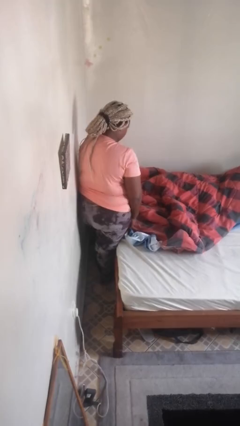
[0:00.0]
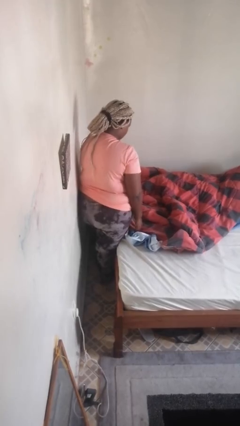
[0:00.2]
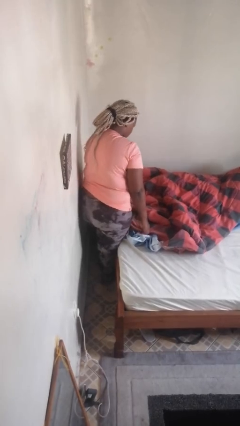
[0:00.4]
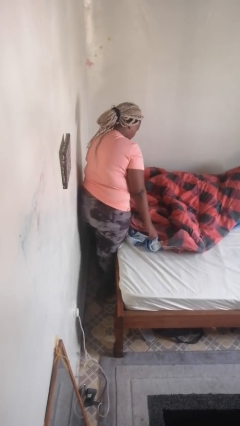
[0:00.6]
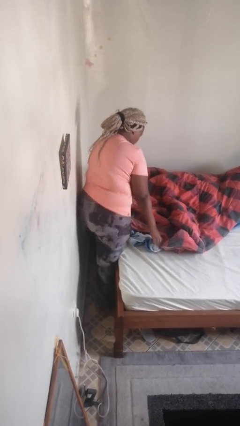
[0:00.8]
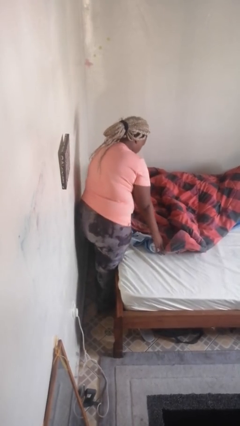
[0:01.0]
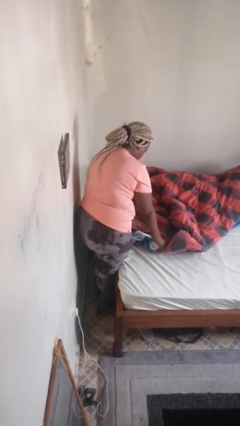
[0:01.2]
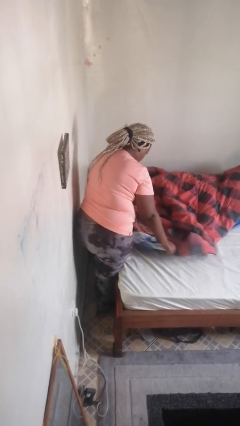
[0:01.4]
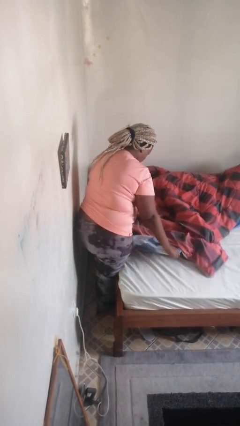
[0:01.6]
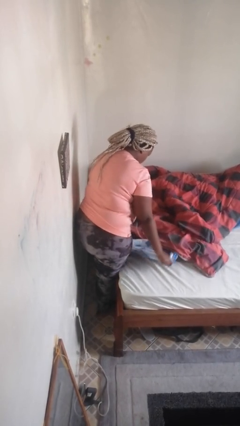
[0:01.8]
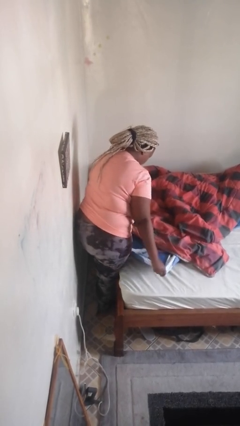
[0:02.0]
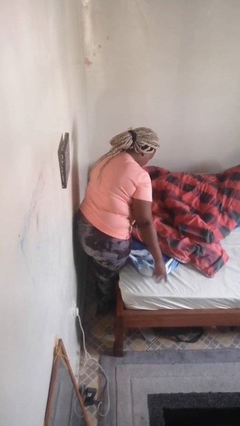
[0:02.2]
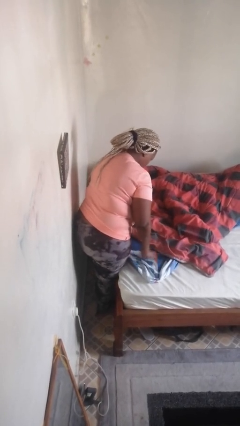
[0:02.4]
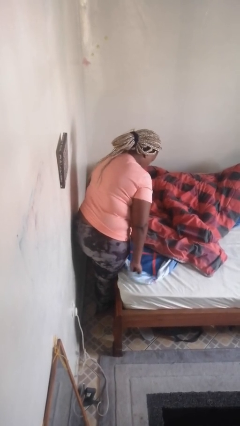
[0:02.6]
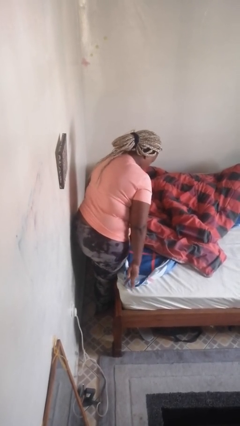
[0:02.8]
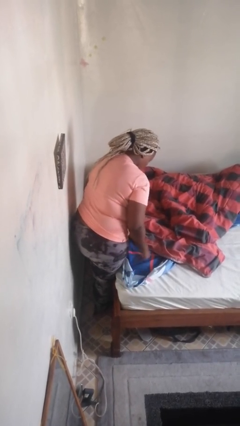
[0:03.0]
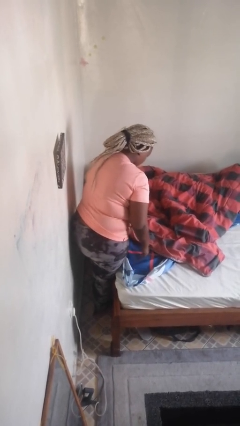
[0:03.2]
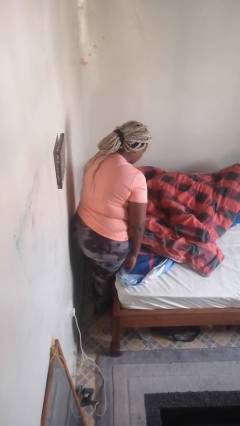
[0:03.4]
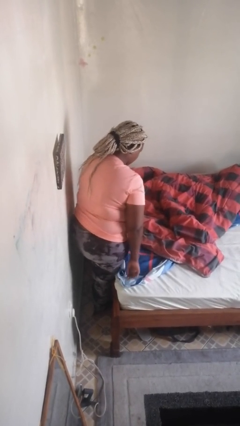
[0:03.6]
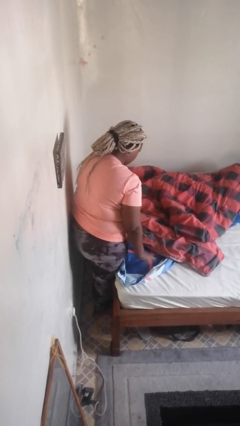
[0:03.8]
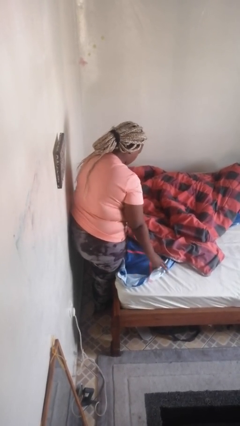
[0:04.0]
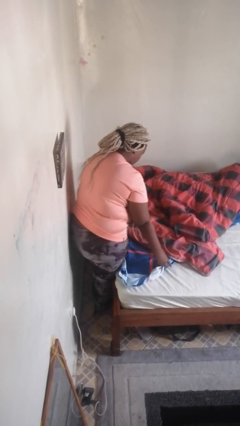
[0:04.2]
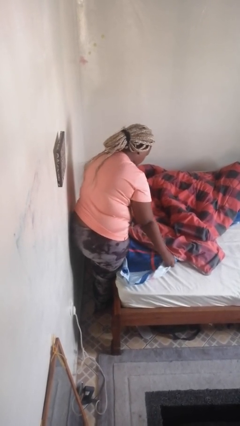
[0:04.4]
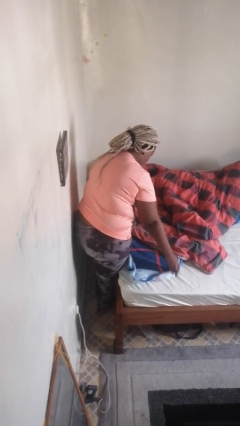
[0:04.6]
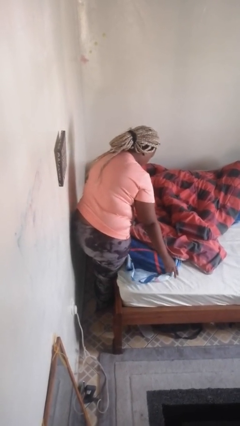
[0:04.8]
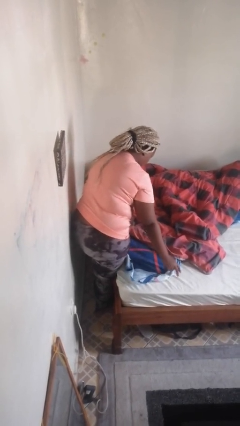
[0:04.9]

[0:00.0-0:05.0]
person makes bed

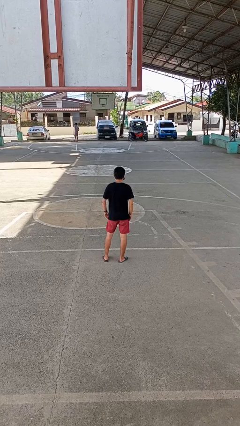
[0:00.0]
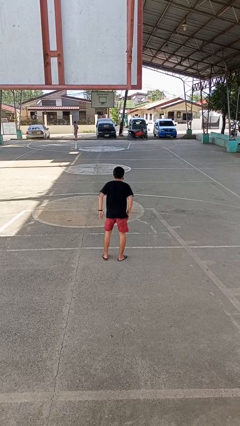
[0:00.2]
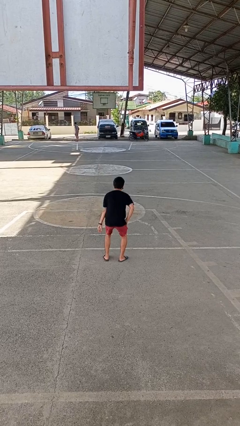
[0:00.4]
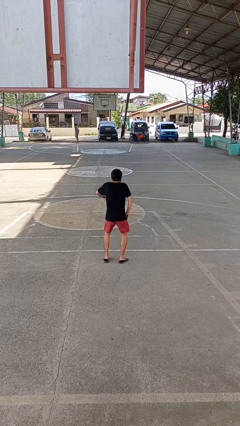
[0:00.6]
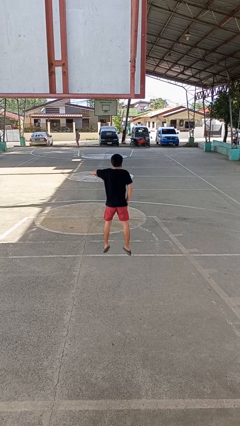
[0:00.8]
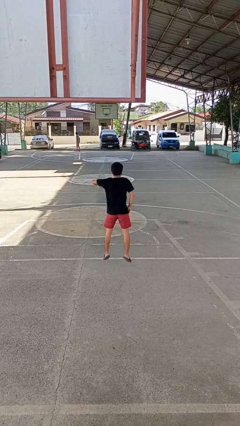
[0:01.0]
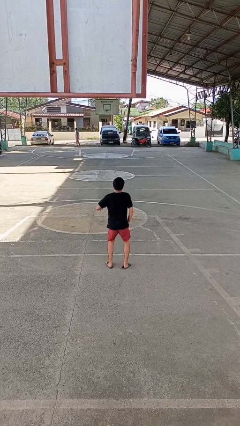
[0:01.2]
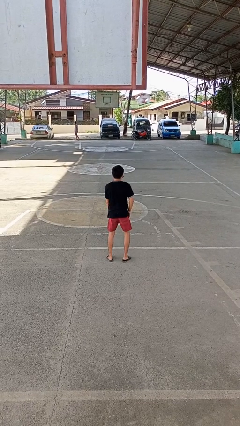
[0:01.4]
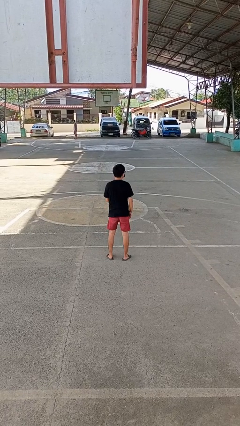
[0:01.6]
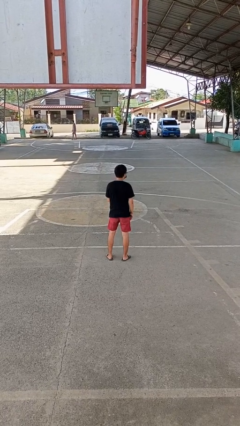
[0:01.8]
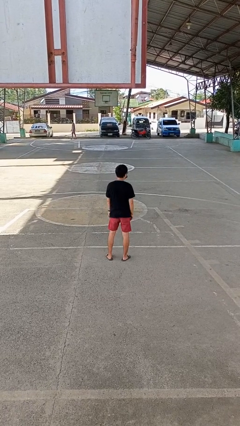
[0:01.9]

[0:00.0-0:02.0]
person jumps

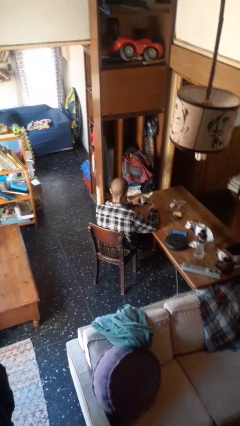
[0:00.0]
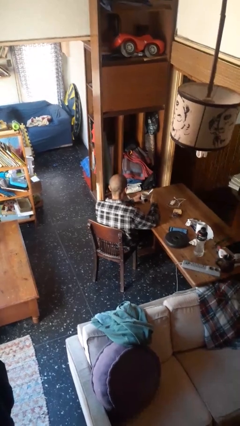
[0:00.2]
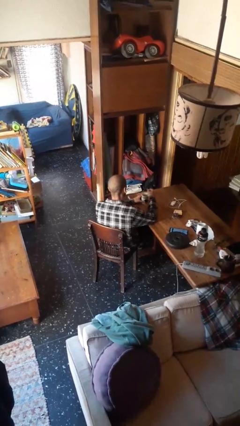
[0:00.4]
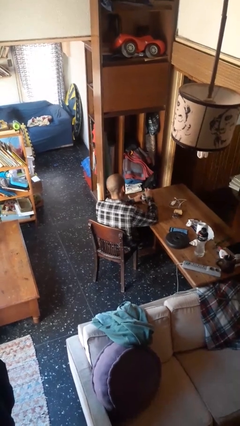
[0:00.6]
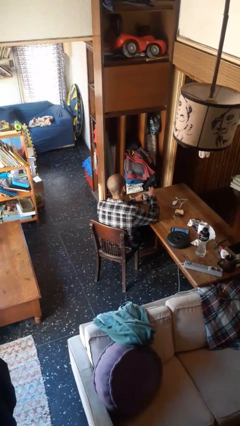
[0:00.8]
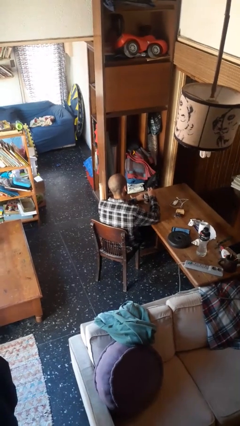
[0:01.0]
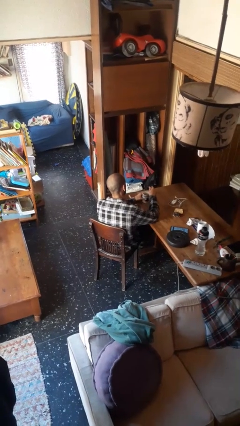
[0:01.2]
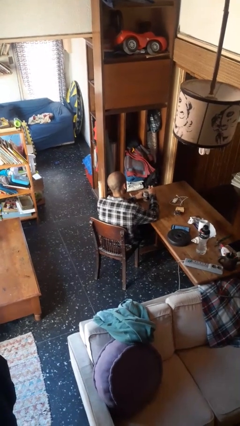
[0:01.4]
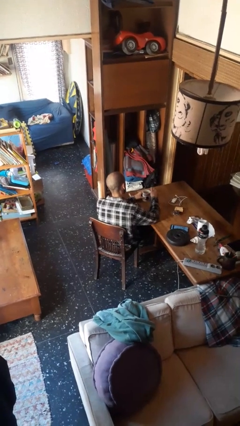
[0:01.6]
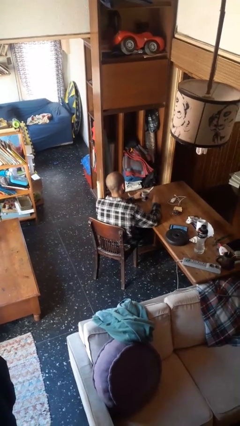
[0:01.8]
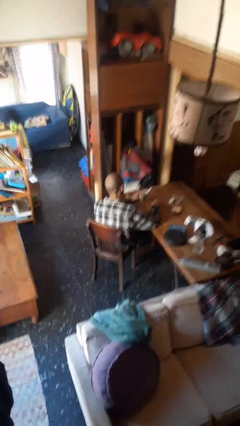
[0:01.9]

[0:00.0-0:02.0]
person stirs mug

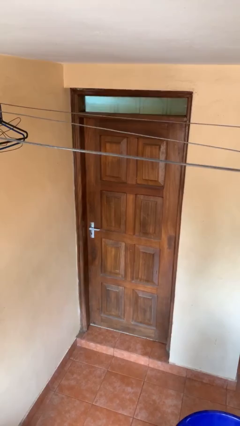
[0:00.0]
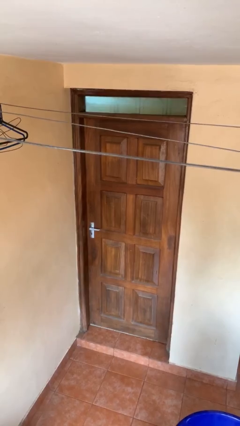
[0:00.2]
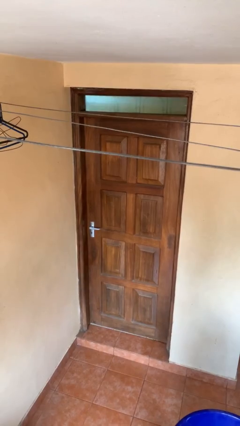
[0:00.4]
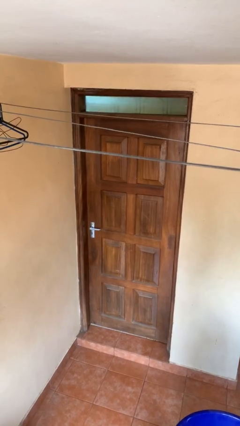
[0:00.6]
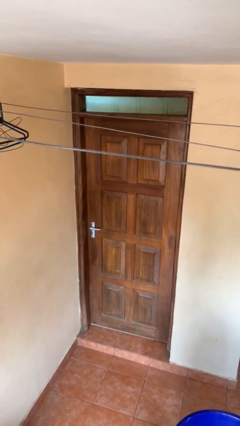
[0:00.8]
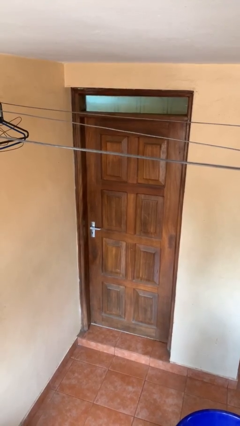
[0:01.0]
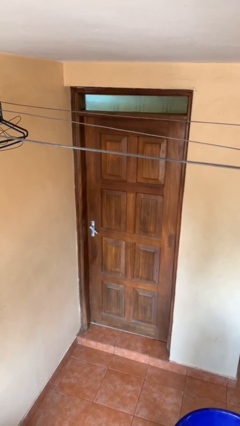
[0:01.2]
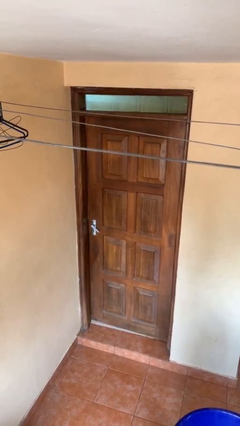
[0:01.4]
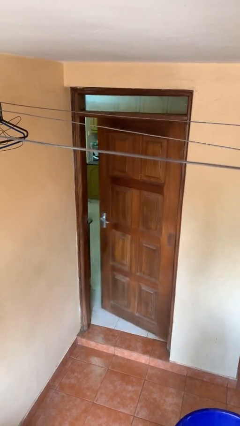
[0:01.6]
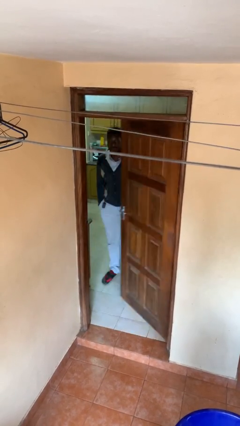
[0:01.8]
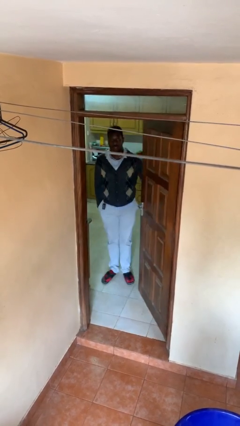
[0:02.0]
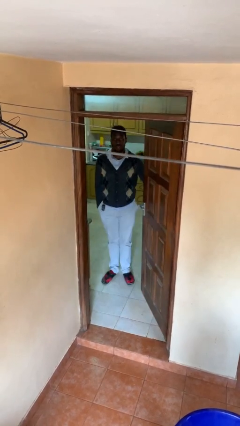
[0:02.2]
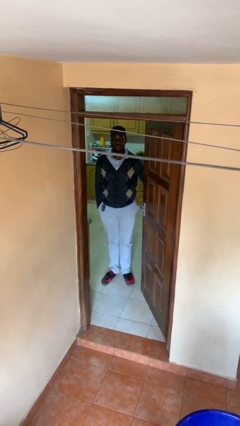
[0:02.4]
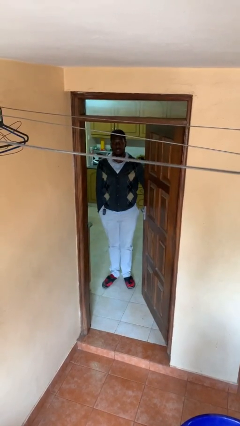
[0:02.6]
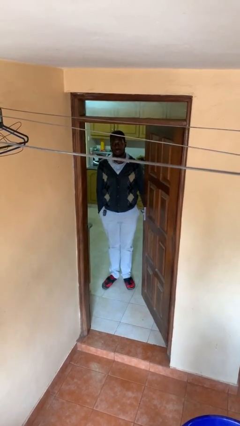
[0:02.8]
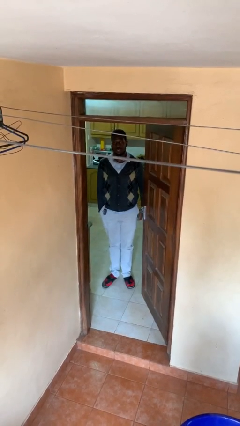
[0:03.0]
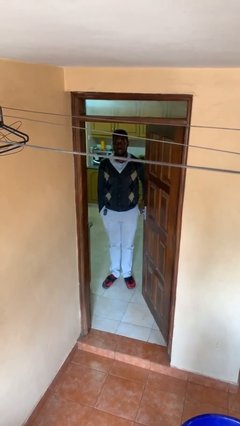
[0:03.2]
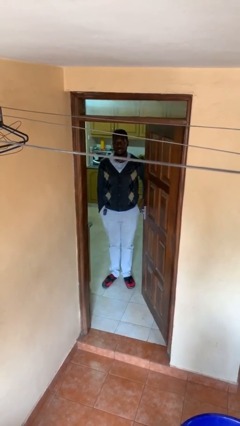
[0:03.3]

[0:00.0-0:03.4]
person opens facility door

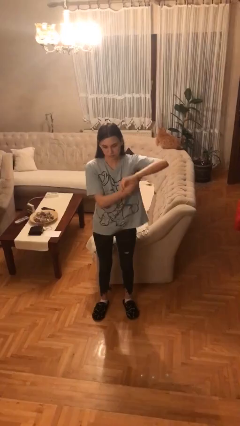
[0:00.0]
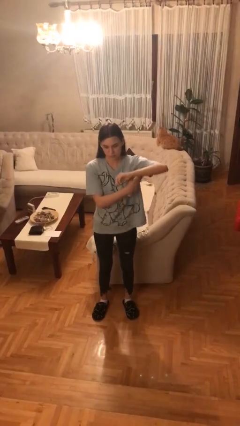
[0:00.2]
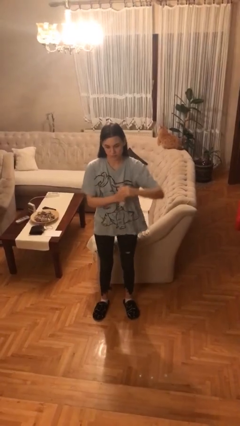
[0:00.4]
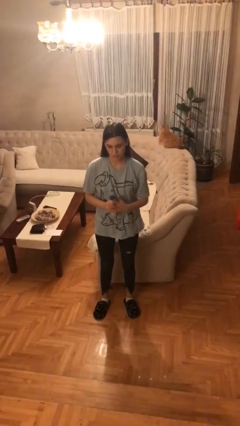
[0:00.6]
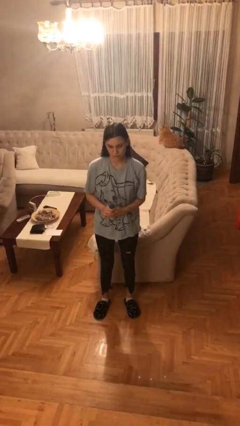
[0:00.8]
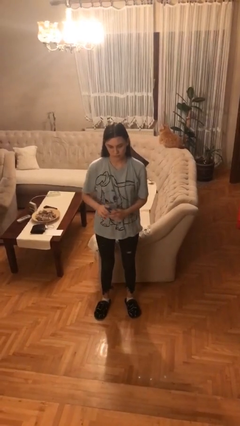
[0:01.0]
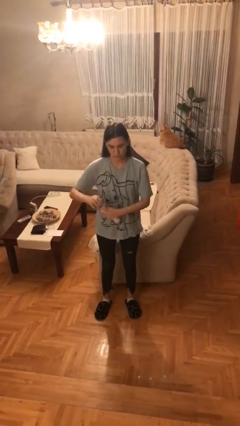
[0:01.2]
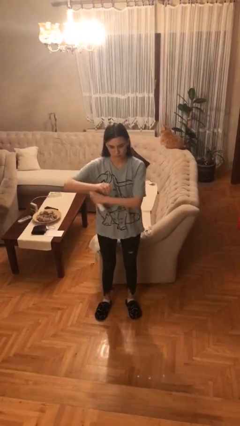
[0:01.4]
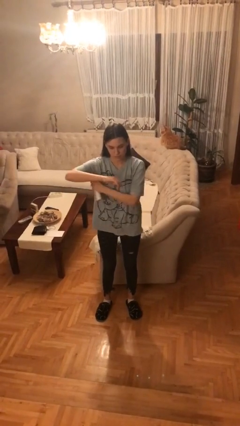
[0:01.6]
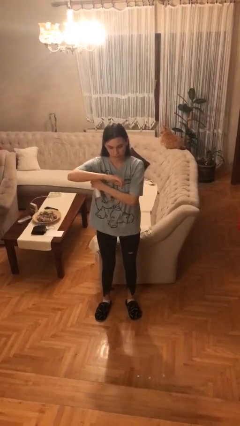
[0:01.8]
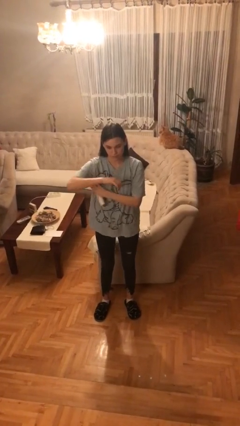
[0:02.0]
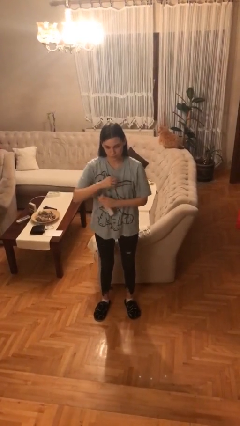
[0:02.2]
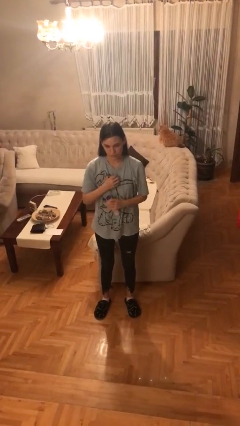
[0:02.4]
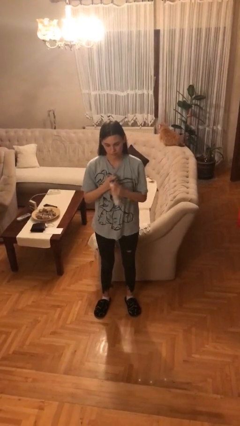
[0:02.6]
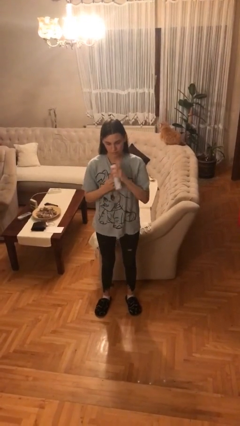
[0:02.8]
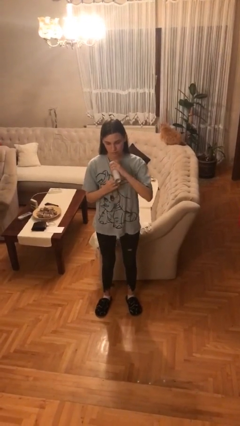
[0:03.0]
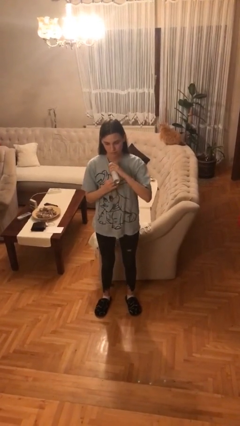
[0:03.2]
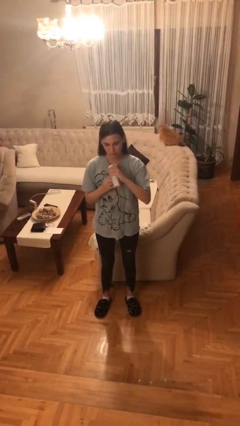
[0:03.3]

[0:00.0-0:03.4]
person applies deodorant

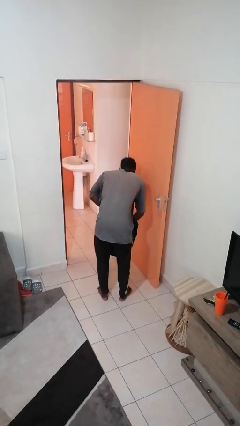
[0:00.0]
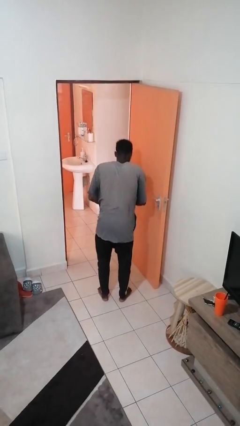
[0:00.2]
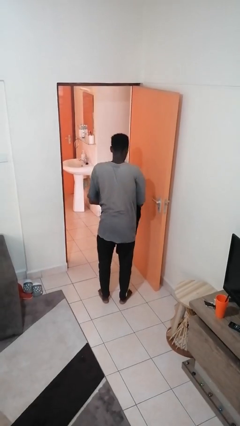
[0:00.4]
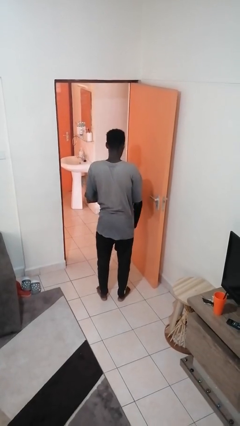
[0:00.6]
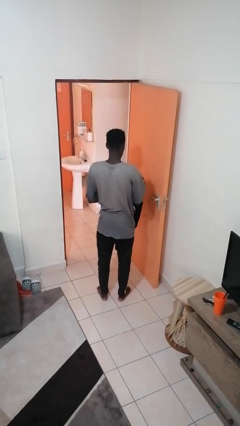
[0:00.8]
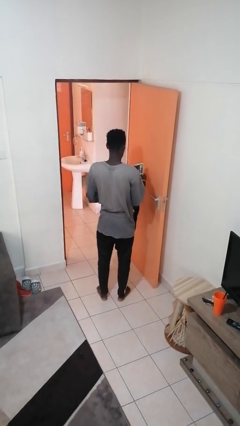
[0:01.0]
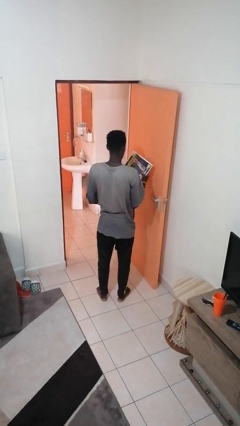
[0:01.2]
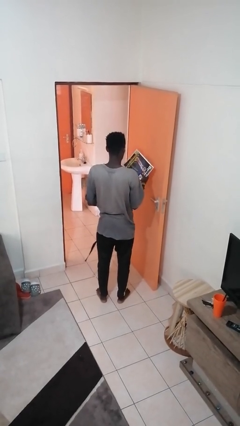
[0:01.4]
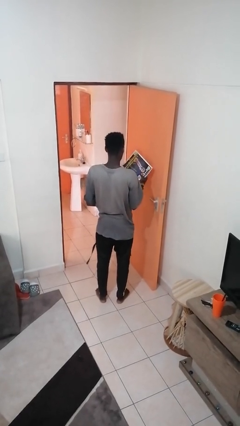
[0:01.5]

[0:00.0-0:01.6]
person takes object from backpack
